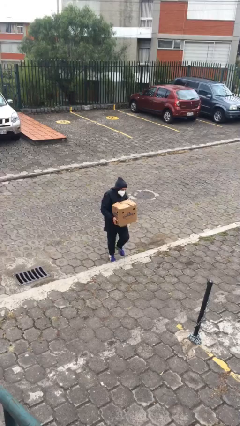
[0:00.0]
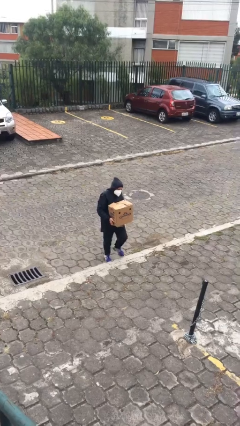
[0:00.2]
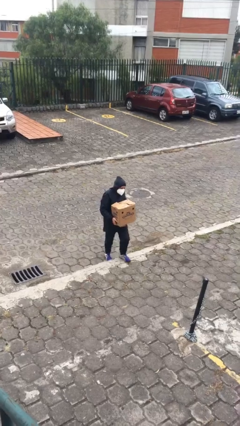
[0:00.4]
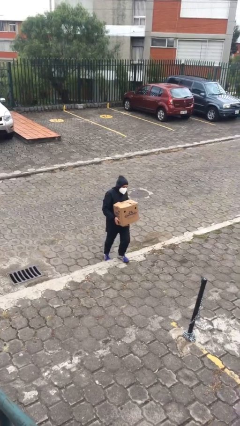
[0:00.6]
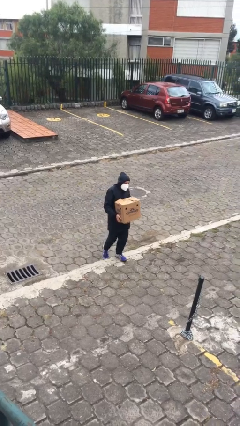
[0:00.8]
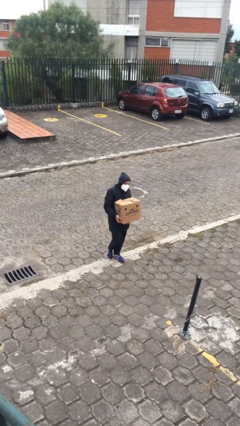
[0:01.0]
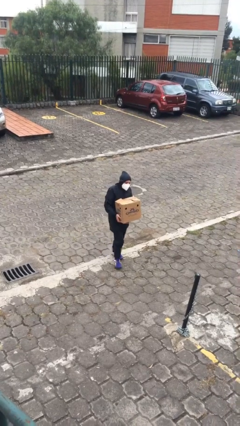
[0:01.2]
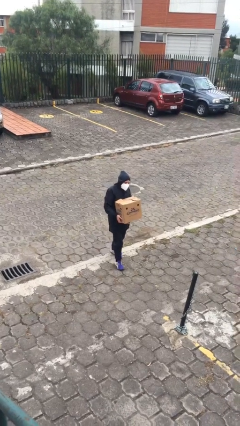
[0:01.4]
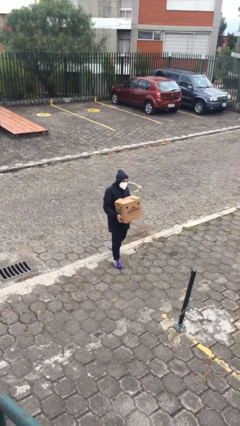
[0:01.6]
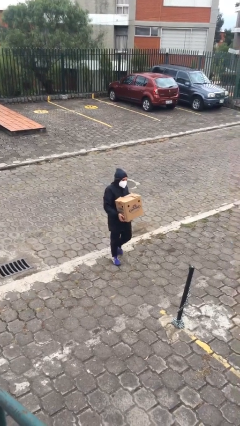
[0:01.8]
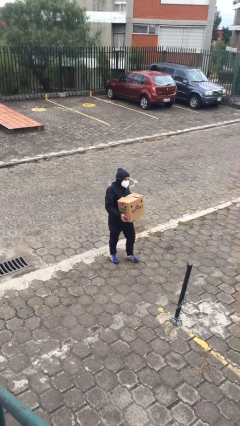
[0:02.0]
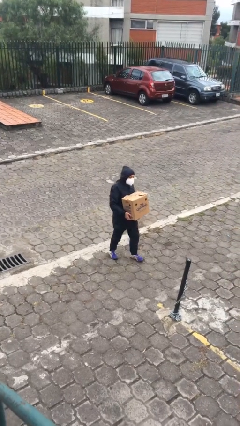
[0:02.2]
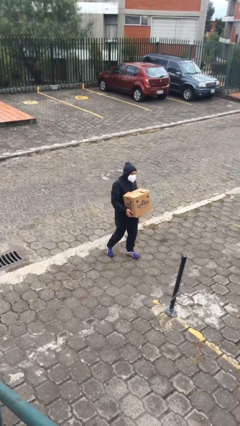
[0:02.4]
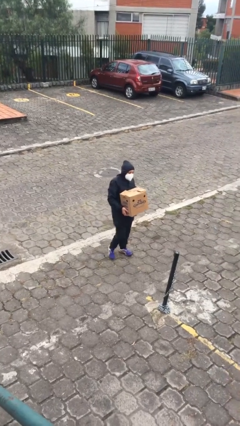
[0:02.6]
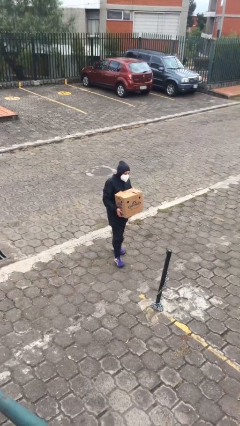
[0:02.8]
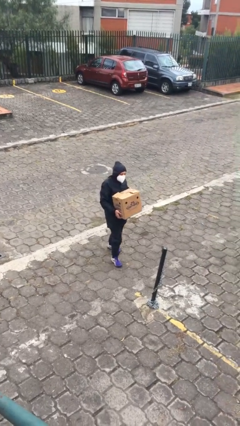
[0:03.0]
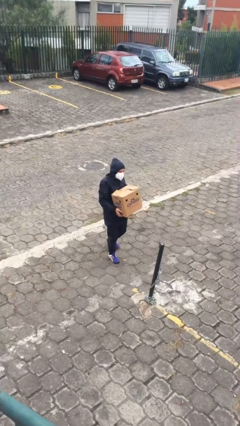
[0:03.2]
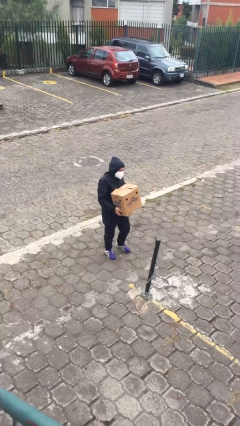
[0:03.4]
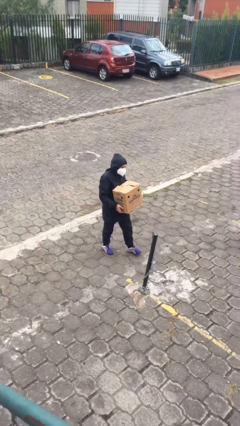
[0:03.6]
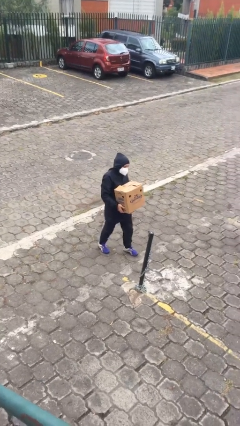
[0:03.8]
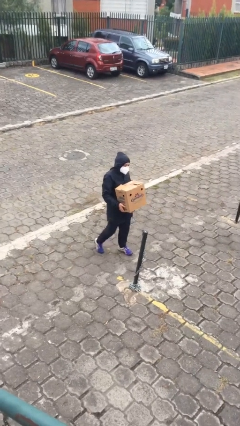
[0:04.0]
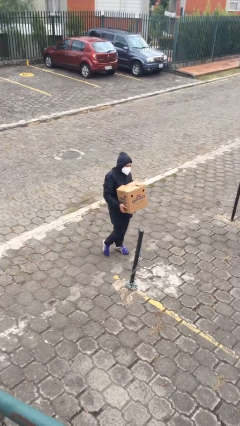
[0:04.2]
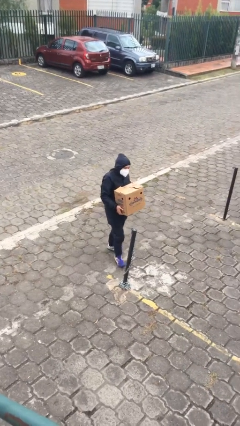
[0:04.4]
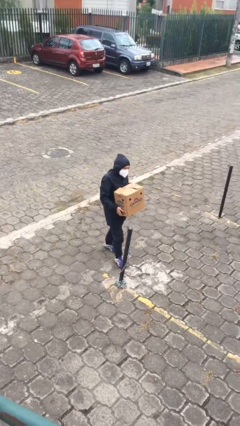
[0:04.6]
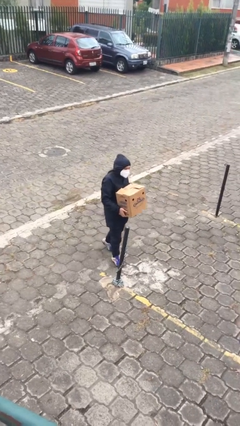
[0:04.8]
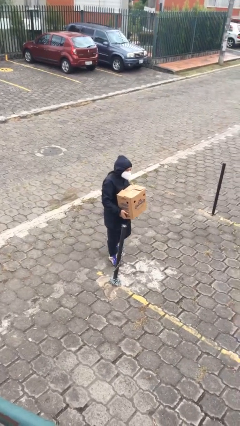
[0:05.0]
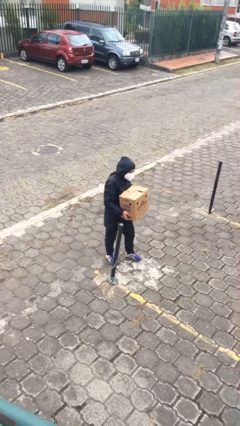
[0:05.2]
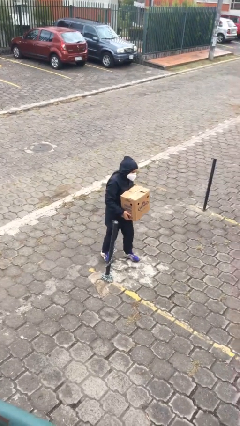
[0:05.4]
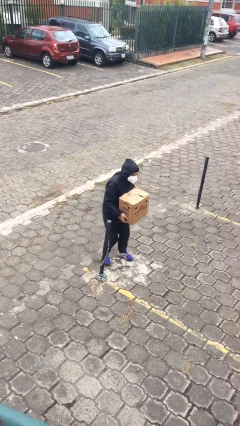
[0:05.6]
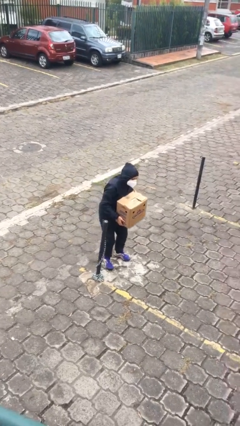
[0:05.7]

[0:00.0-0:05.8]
person carries heavy object

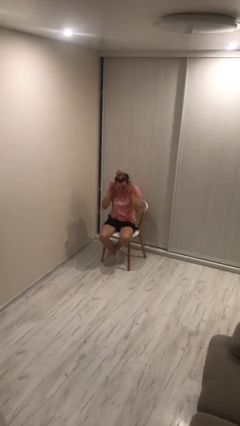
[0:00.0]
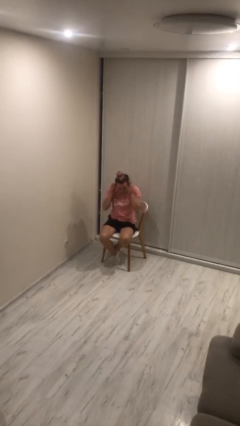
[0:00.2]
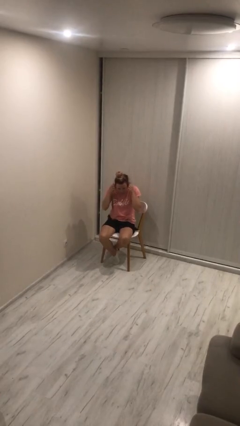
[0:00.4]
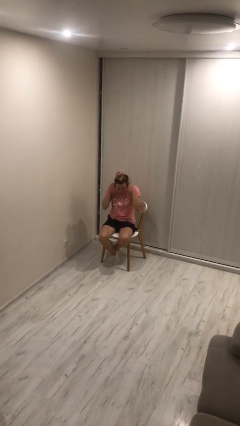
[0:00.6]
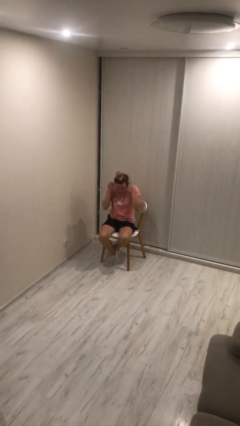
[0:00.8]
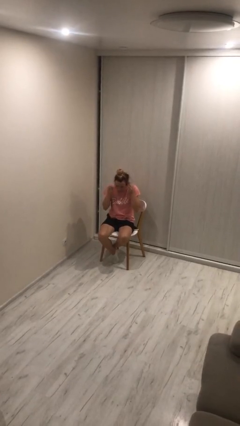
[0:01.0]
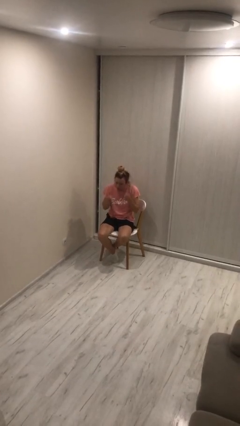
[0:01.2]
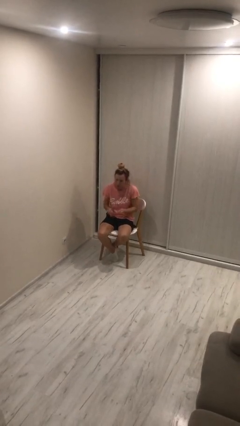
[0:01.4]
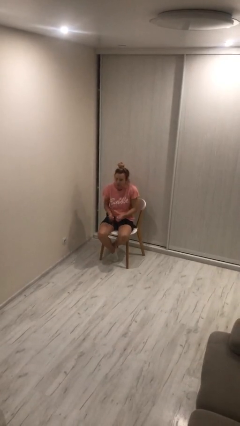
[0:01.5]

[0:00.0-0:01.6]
person takes off earrings

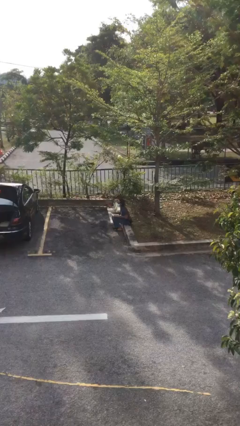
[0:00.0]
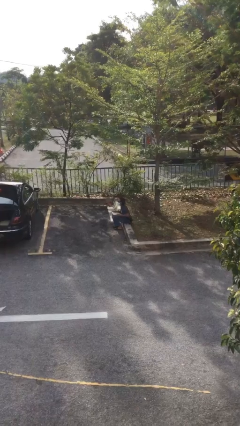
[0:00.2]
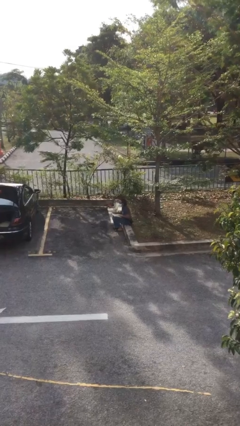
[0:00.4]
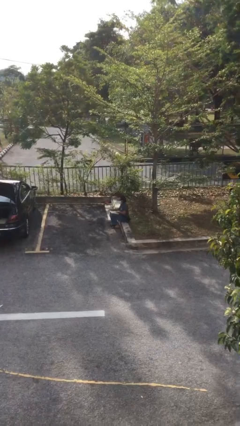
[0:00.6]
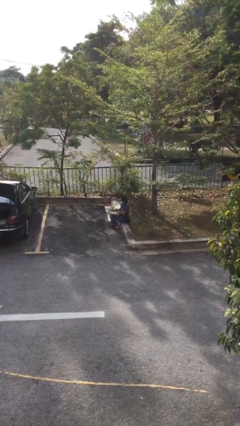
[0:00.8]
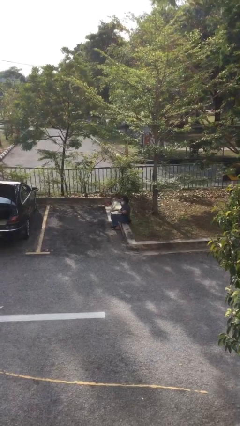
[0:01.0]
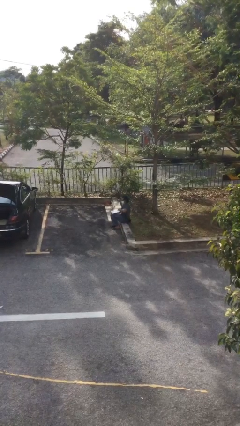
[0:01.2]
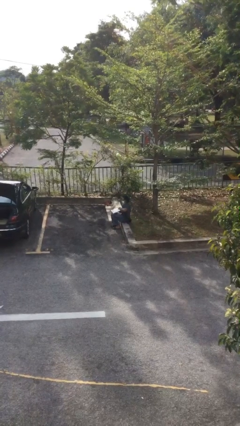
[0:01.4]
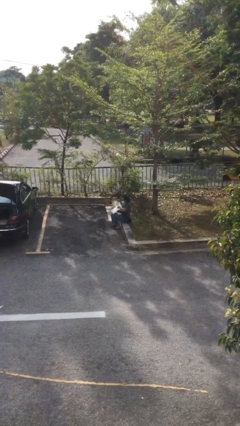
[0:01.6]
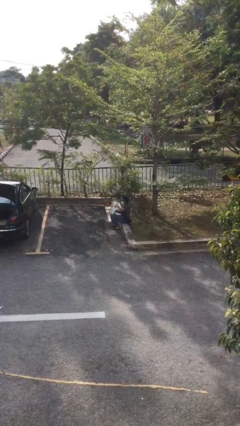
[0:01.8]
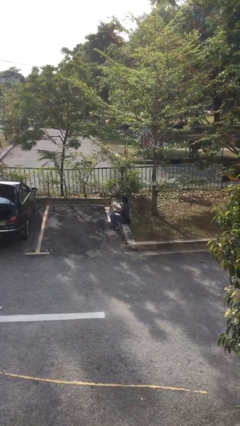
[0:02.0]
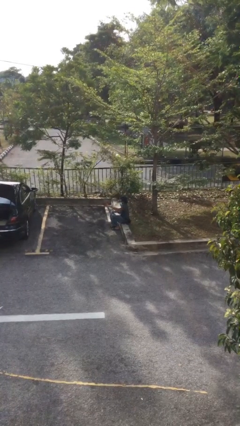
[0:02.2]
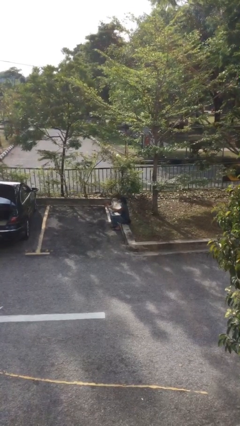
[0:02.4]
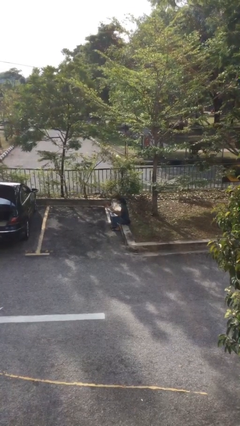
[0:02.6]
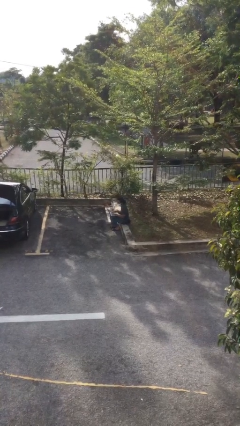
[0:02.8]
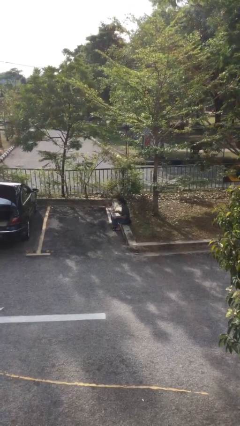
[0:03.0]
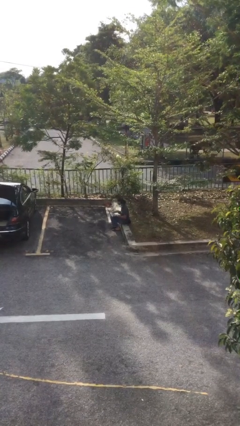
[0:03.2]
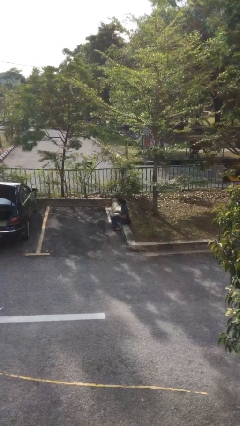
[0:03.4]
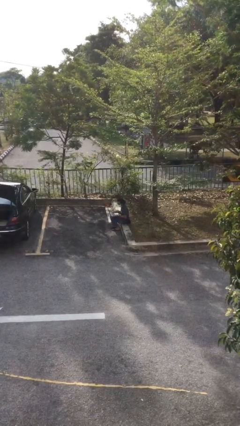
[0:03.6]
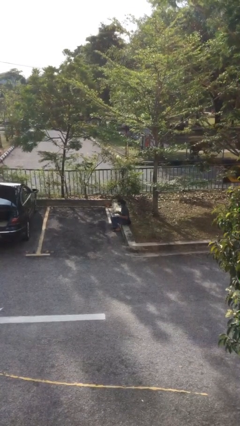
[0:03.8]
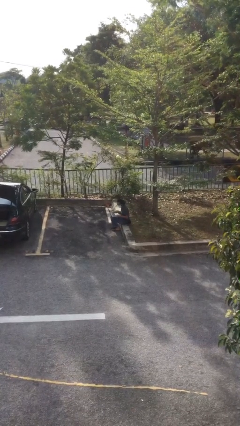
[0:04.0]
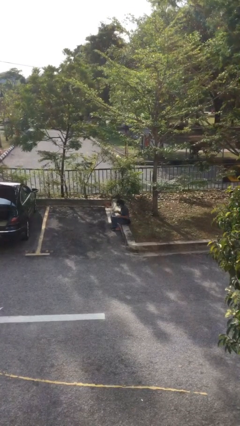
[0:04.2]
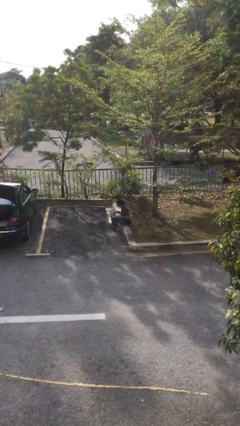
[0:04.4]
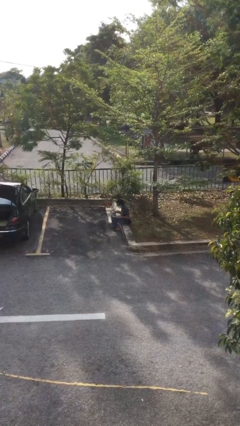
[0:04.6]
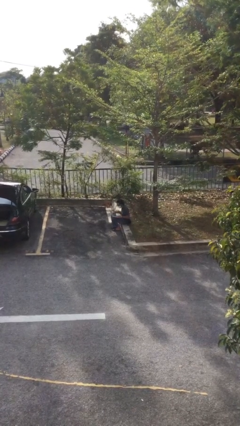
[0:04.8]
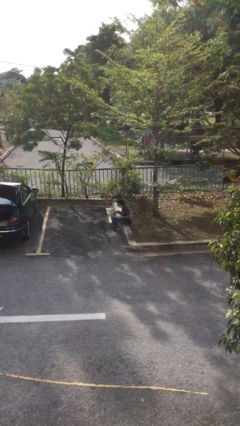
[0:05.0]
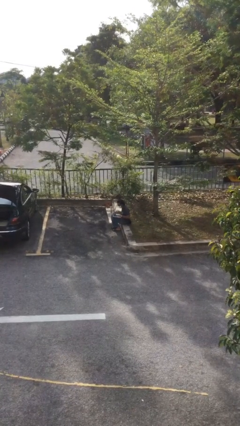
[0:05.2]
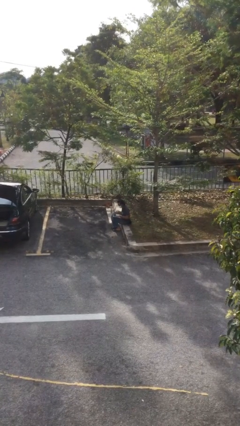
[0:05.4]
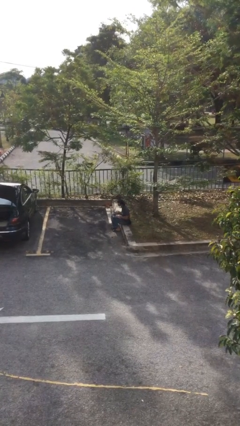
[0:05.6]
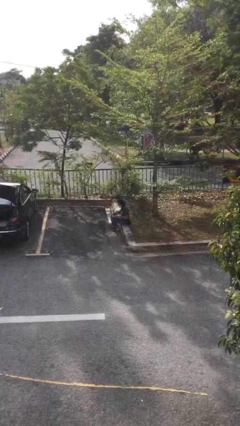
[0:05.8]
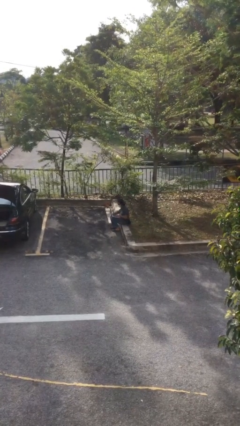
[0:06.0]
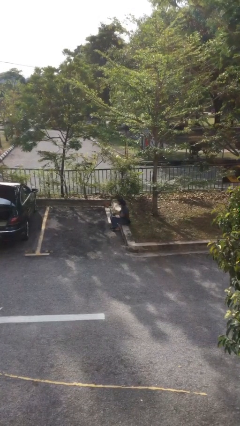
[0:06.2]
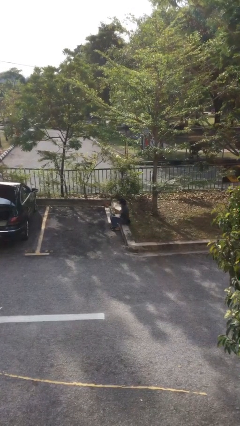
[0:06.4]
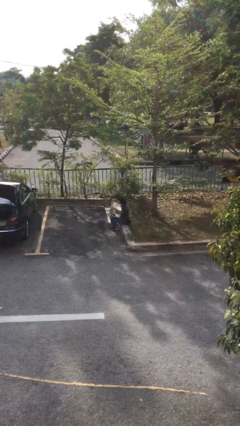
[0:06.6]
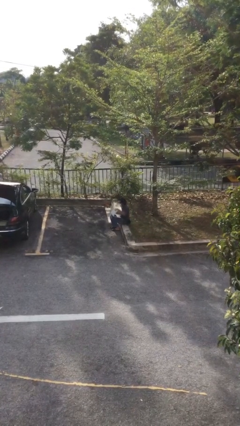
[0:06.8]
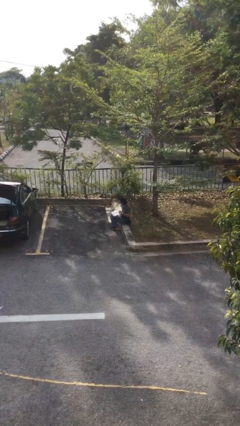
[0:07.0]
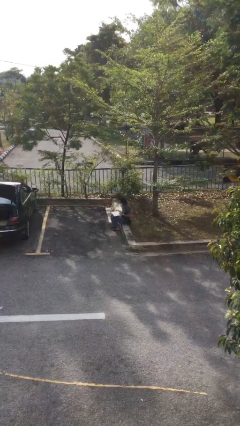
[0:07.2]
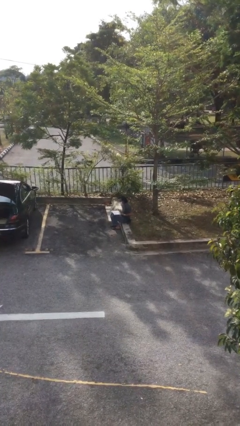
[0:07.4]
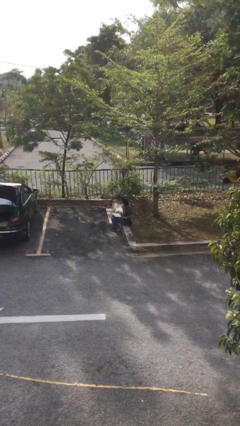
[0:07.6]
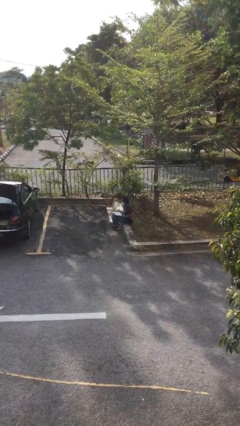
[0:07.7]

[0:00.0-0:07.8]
person interacts with laptop

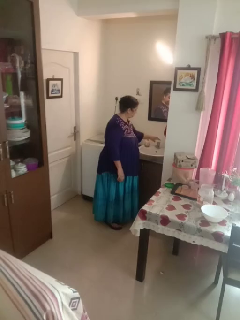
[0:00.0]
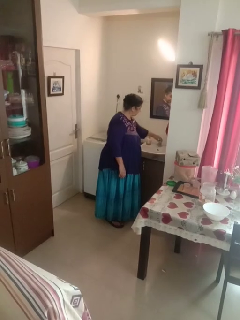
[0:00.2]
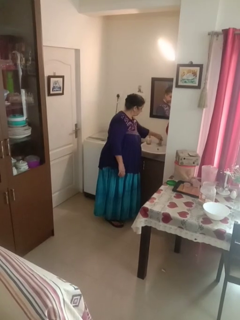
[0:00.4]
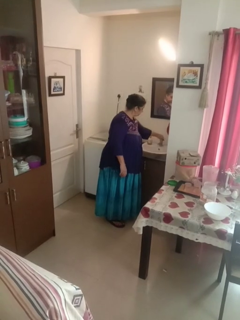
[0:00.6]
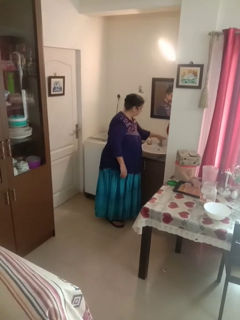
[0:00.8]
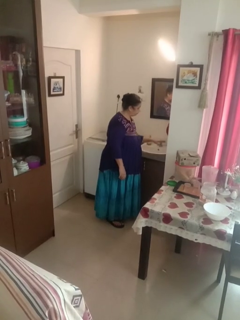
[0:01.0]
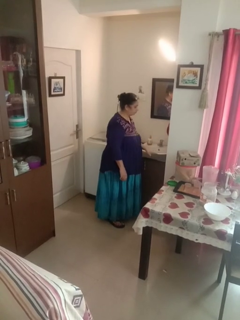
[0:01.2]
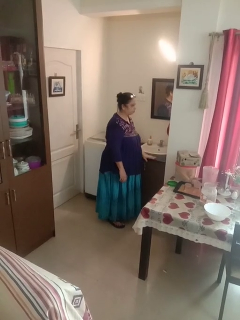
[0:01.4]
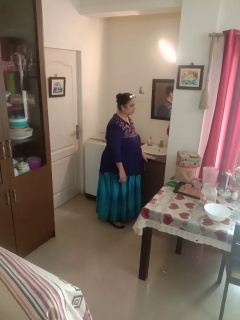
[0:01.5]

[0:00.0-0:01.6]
person turns on faucet

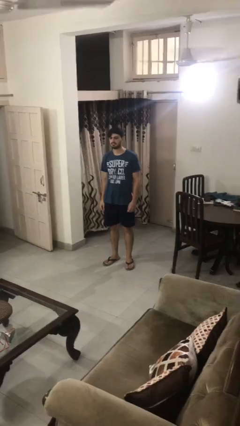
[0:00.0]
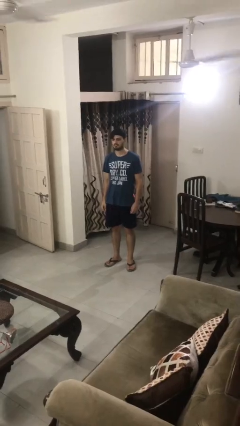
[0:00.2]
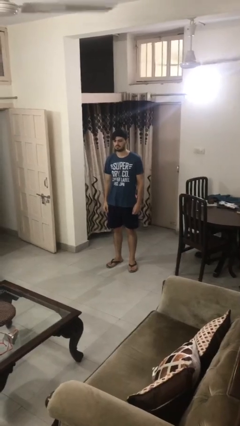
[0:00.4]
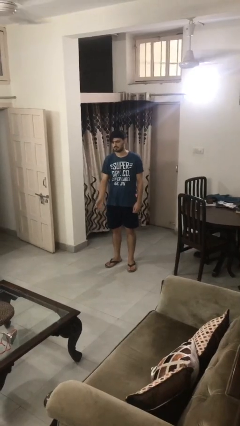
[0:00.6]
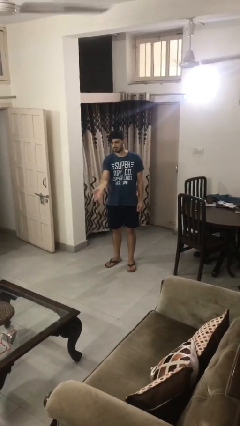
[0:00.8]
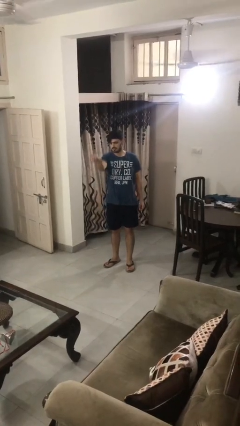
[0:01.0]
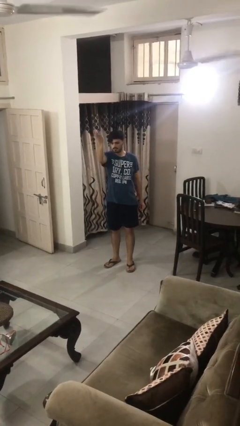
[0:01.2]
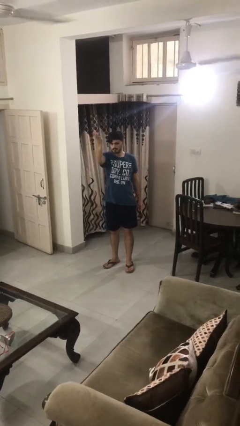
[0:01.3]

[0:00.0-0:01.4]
person gestures swipe up
